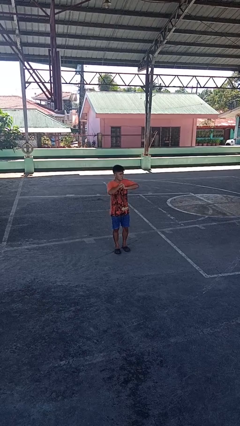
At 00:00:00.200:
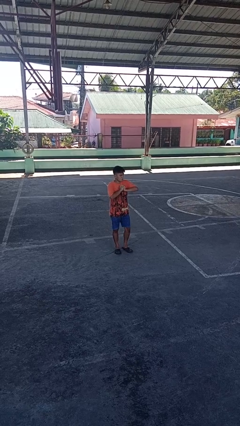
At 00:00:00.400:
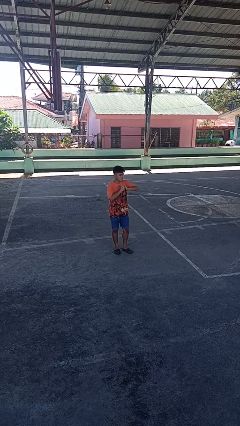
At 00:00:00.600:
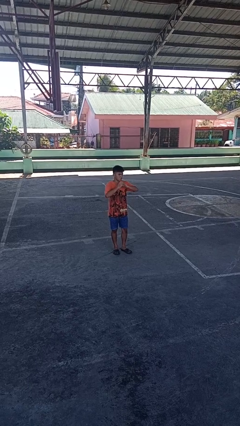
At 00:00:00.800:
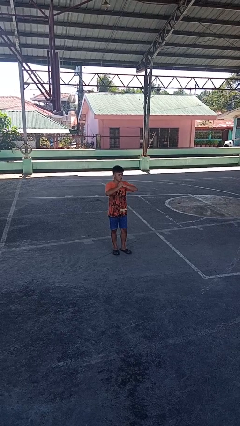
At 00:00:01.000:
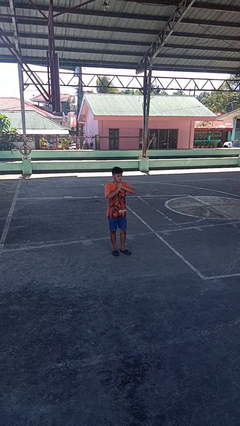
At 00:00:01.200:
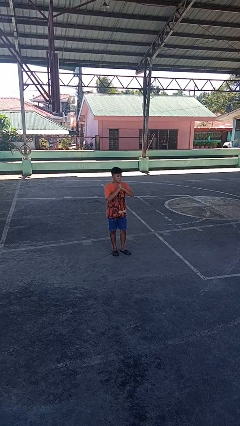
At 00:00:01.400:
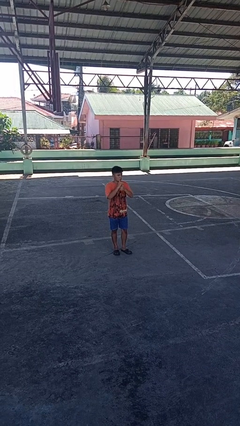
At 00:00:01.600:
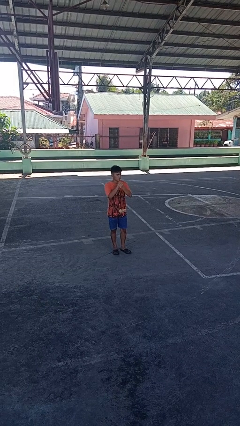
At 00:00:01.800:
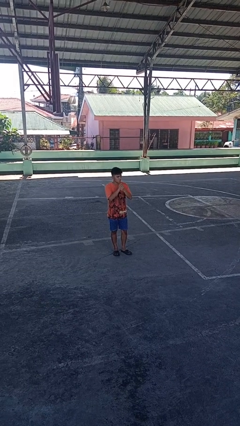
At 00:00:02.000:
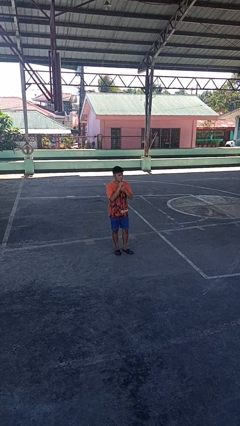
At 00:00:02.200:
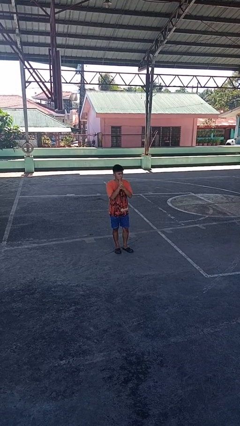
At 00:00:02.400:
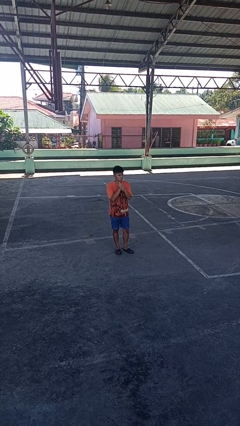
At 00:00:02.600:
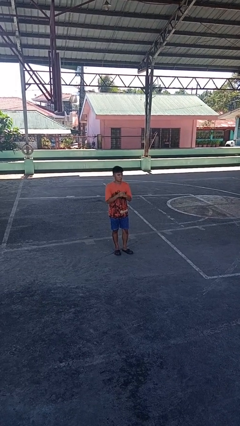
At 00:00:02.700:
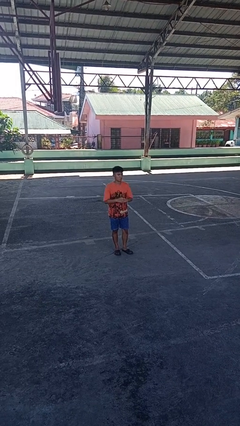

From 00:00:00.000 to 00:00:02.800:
person cracks knuckles

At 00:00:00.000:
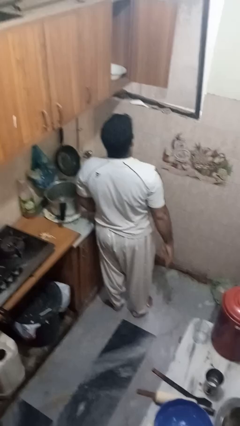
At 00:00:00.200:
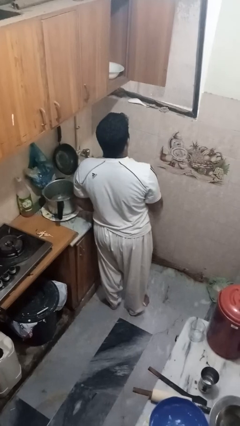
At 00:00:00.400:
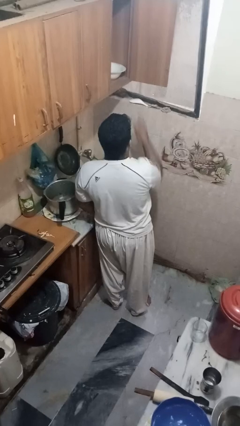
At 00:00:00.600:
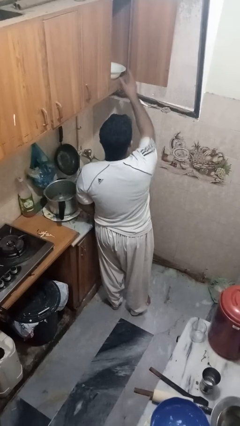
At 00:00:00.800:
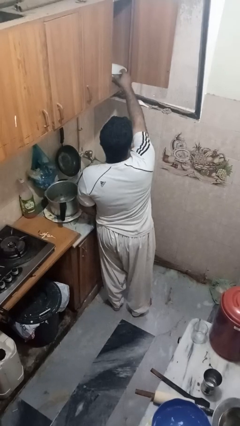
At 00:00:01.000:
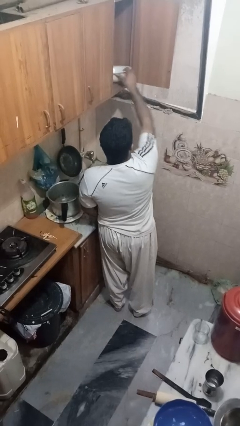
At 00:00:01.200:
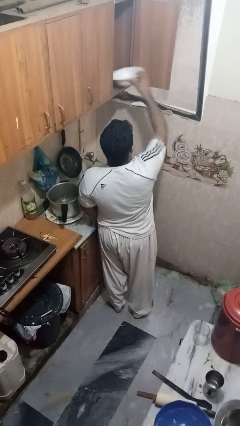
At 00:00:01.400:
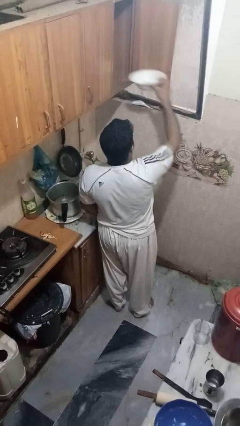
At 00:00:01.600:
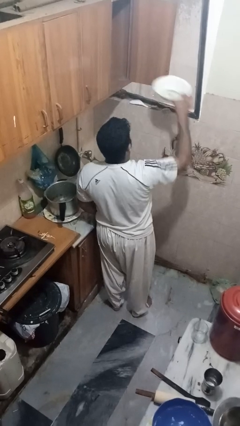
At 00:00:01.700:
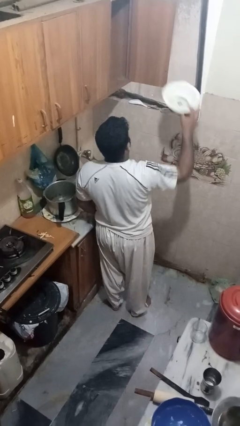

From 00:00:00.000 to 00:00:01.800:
person takes object from cabinet

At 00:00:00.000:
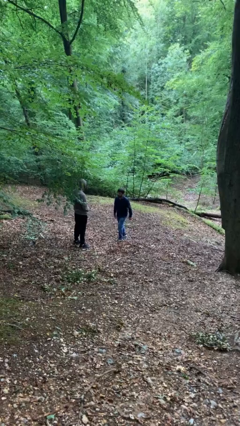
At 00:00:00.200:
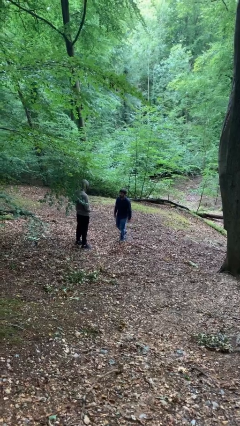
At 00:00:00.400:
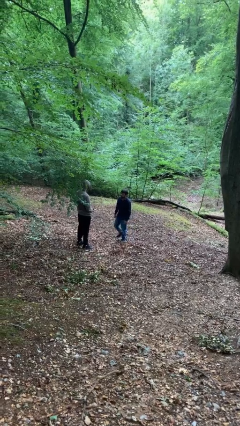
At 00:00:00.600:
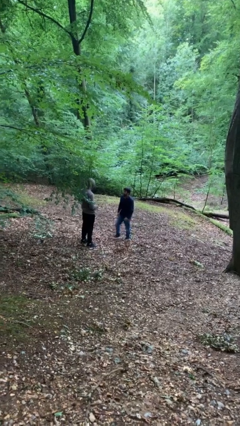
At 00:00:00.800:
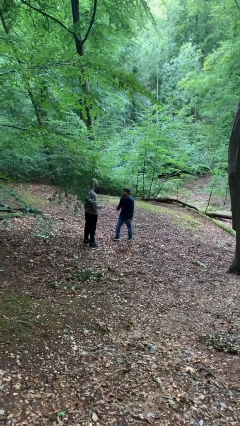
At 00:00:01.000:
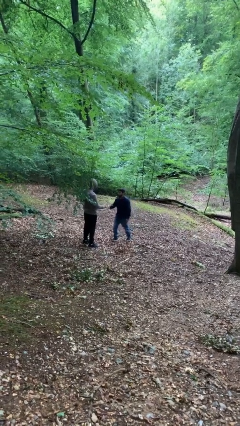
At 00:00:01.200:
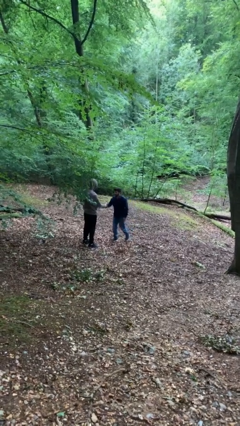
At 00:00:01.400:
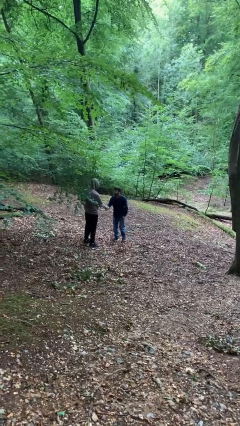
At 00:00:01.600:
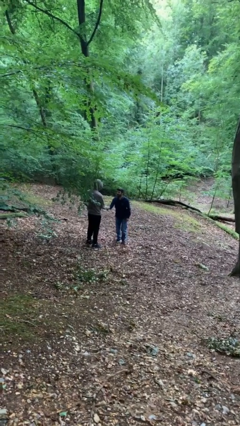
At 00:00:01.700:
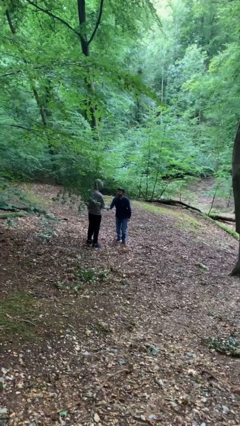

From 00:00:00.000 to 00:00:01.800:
person shakes hand

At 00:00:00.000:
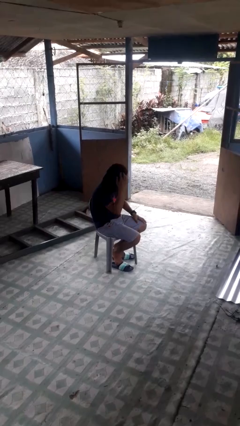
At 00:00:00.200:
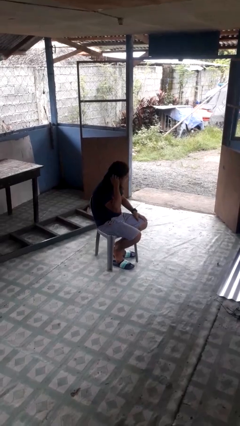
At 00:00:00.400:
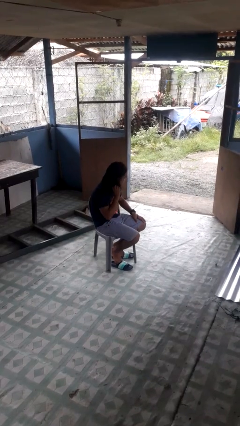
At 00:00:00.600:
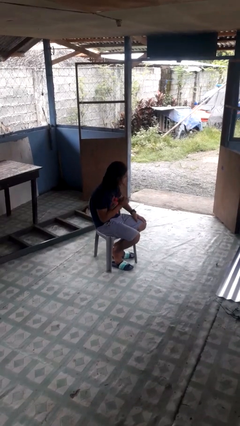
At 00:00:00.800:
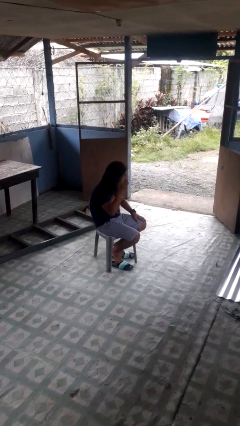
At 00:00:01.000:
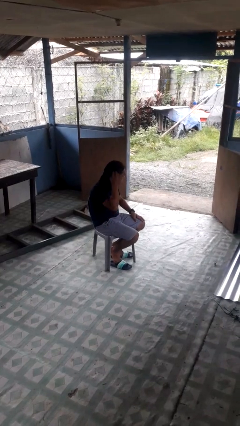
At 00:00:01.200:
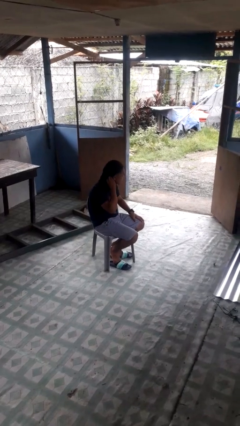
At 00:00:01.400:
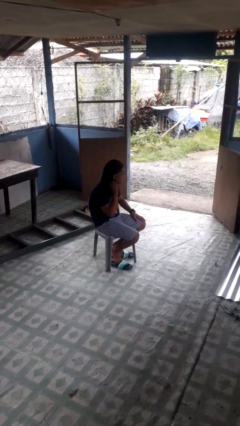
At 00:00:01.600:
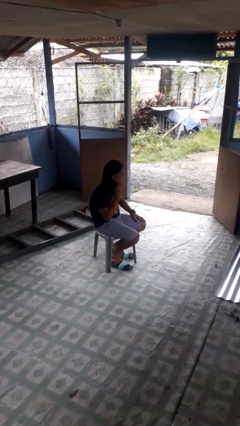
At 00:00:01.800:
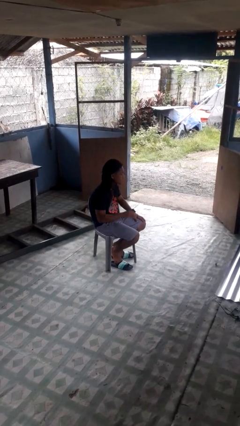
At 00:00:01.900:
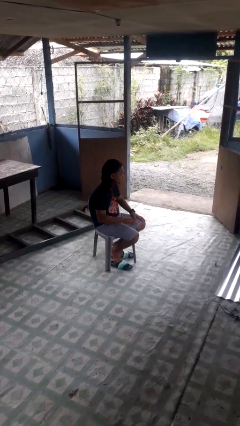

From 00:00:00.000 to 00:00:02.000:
person strokes hair

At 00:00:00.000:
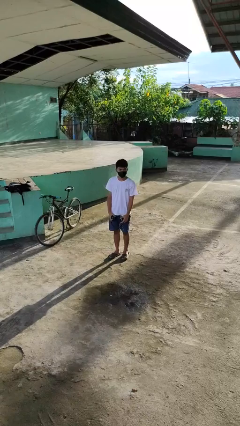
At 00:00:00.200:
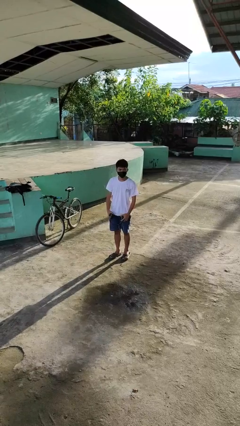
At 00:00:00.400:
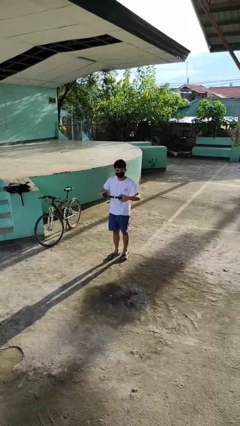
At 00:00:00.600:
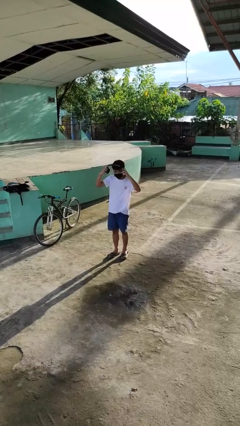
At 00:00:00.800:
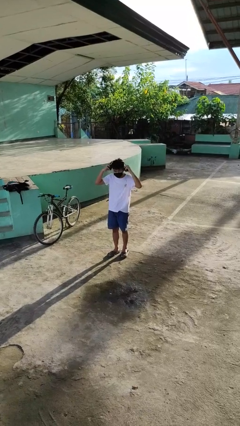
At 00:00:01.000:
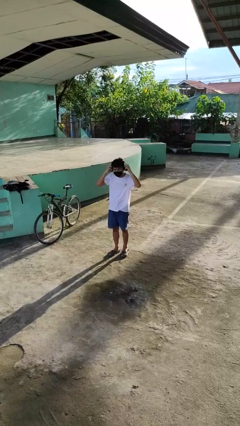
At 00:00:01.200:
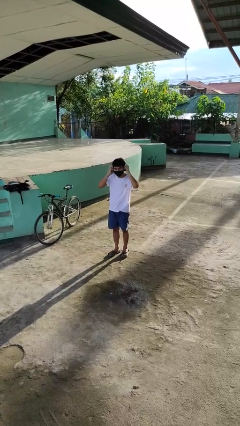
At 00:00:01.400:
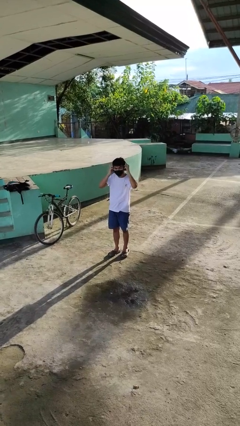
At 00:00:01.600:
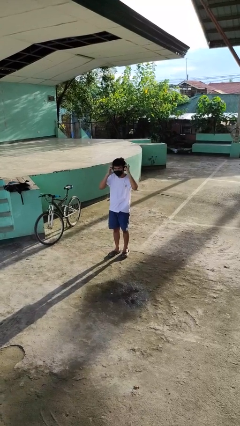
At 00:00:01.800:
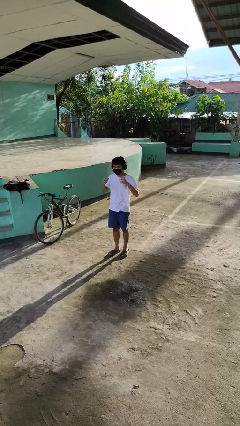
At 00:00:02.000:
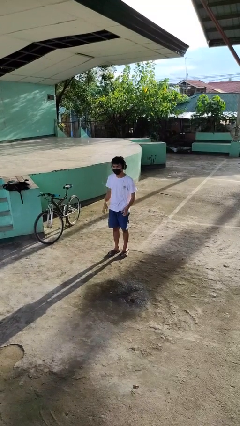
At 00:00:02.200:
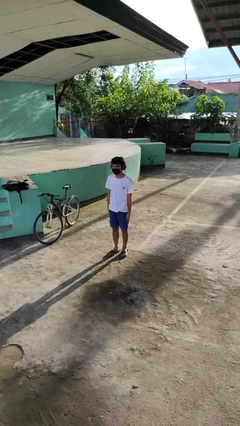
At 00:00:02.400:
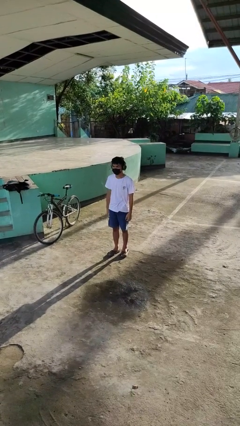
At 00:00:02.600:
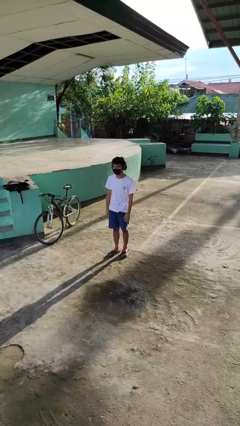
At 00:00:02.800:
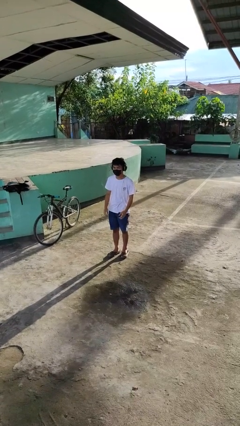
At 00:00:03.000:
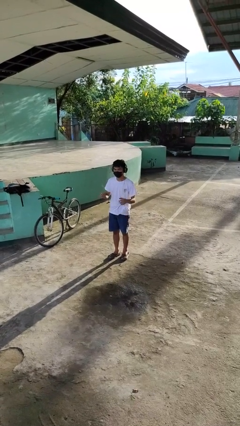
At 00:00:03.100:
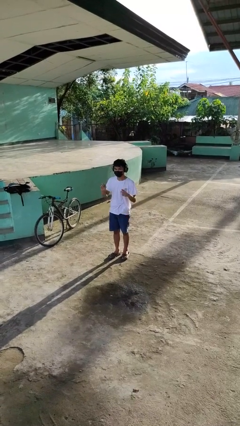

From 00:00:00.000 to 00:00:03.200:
person puts on headphones

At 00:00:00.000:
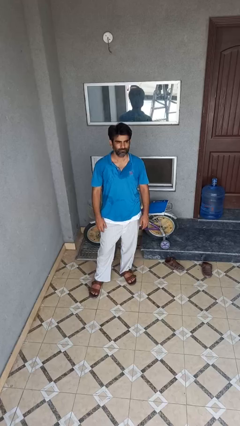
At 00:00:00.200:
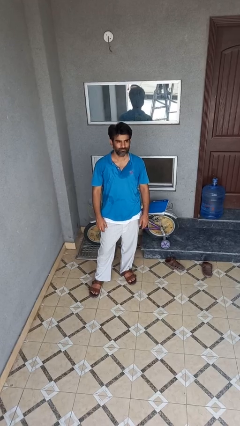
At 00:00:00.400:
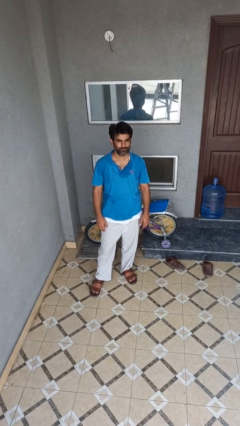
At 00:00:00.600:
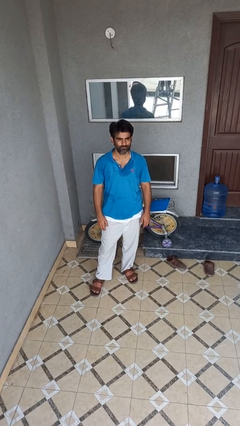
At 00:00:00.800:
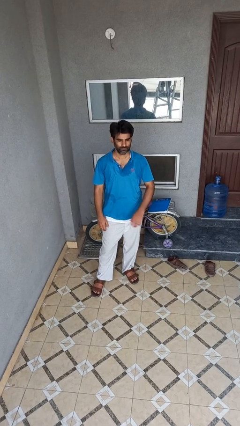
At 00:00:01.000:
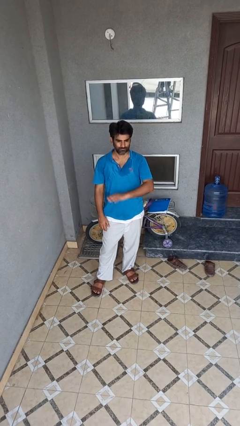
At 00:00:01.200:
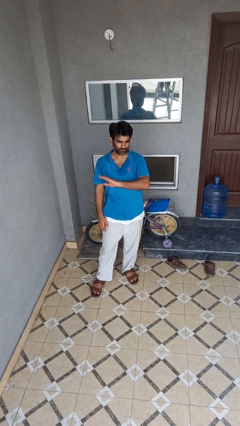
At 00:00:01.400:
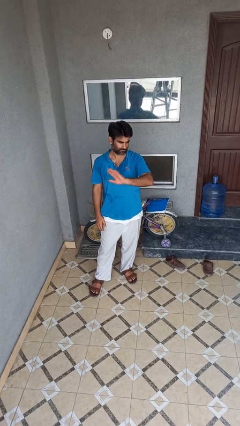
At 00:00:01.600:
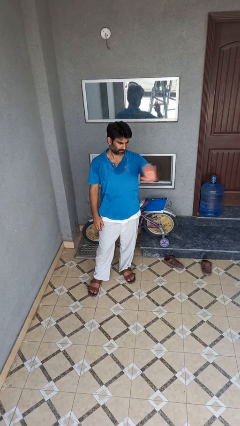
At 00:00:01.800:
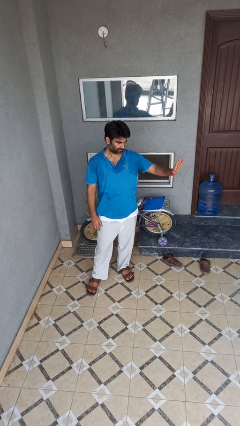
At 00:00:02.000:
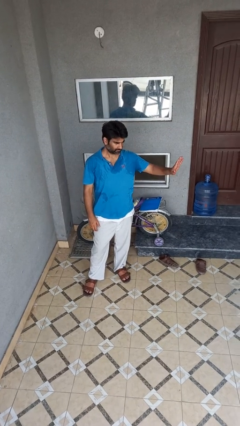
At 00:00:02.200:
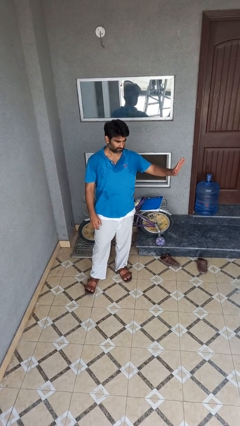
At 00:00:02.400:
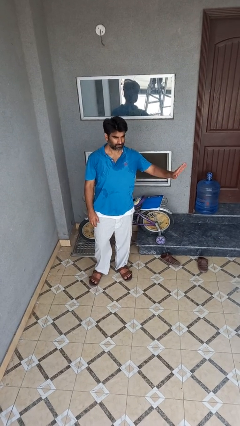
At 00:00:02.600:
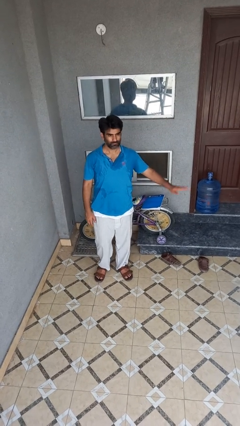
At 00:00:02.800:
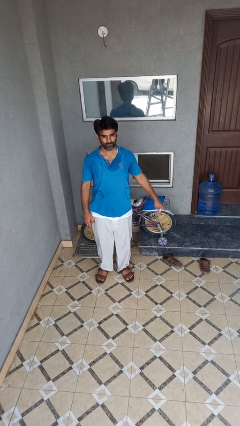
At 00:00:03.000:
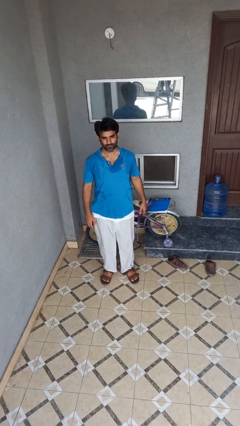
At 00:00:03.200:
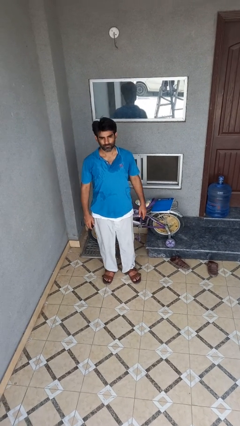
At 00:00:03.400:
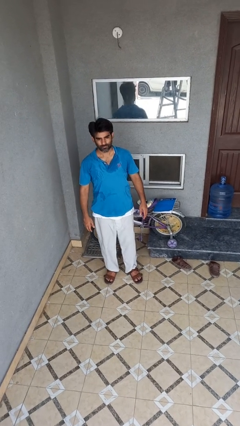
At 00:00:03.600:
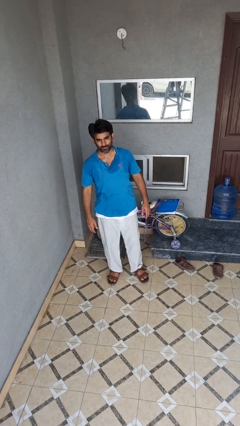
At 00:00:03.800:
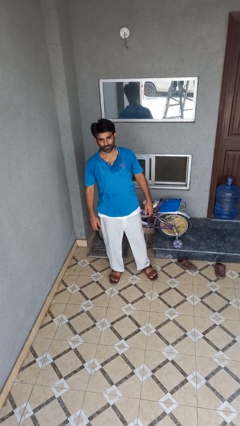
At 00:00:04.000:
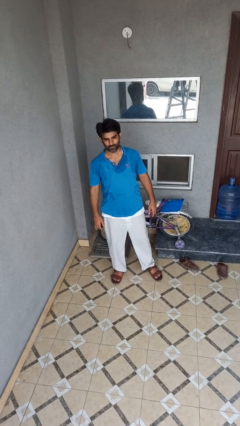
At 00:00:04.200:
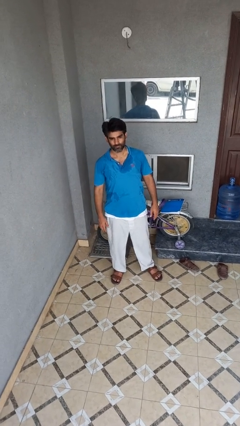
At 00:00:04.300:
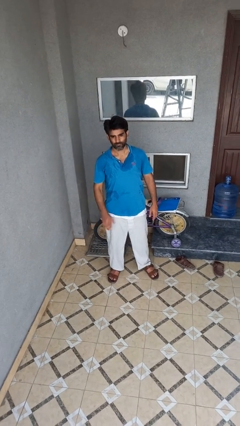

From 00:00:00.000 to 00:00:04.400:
person gestures swipe left

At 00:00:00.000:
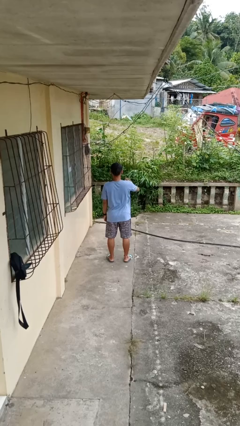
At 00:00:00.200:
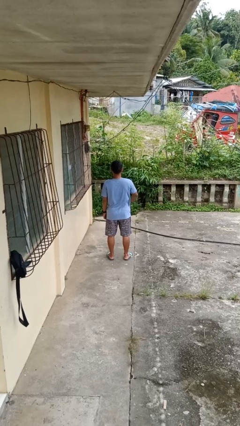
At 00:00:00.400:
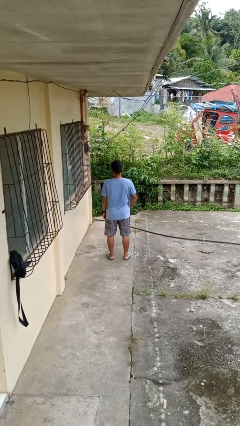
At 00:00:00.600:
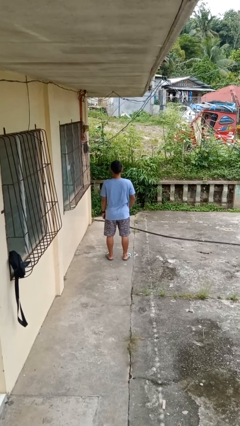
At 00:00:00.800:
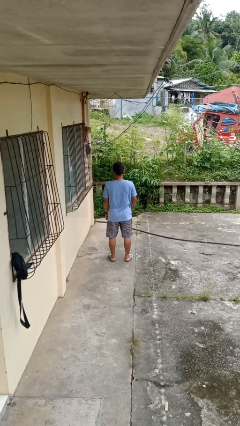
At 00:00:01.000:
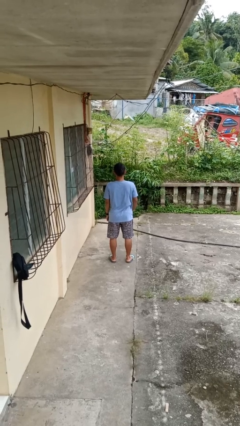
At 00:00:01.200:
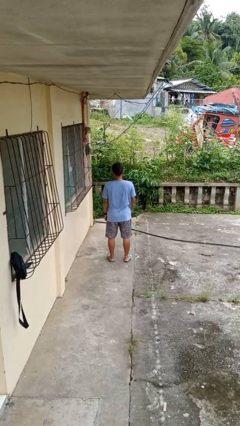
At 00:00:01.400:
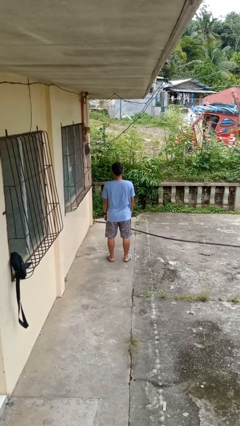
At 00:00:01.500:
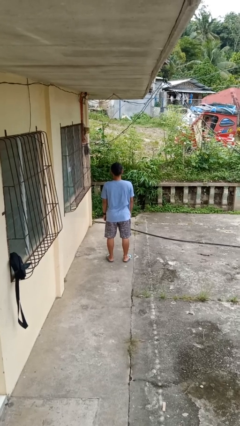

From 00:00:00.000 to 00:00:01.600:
person gestures swipe down
